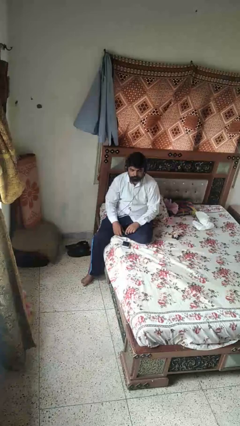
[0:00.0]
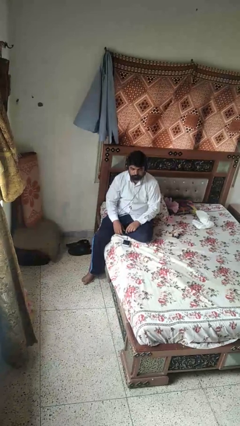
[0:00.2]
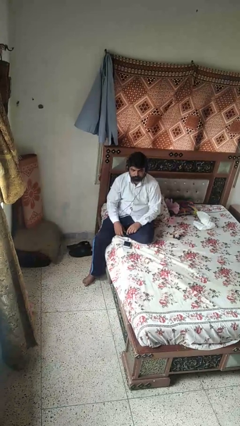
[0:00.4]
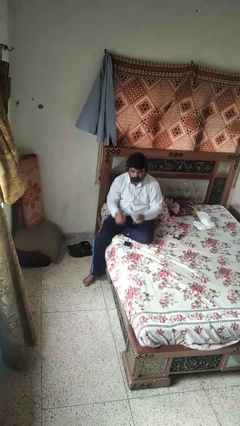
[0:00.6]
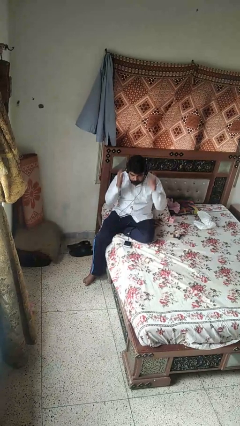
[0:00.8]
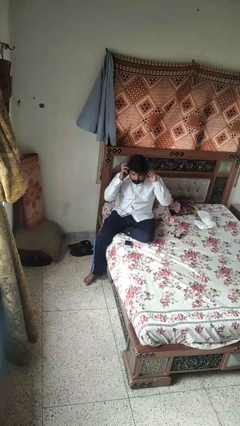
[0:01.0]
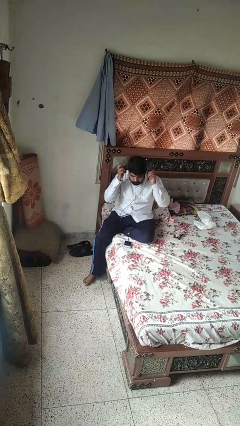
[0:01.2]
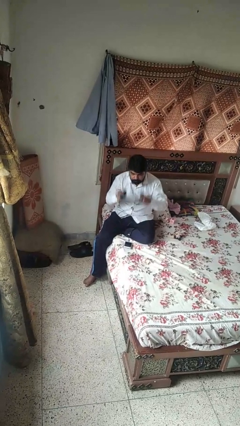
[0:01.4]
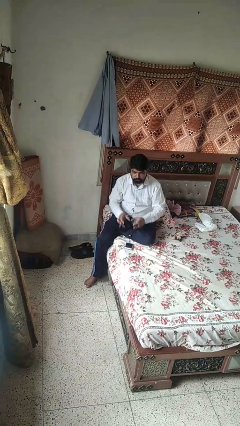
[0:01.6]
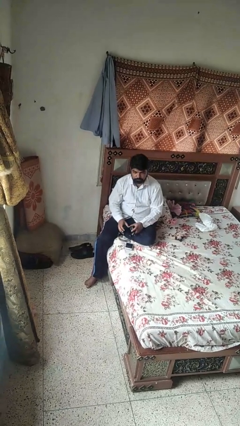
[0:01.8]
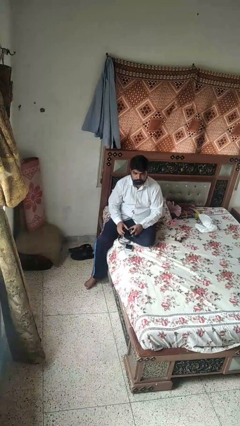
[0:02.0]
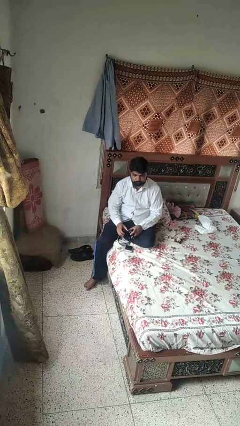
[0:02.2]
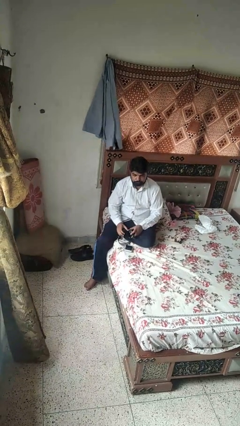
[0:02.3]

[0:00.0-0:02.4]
person takes off headphones

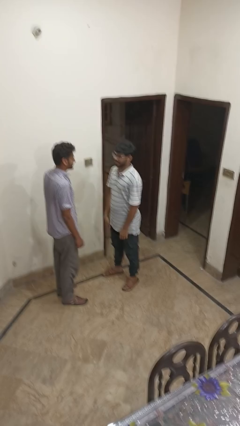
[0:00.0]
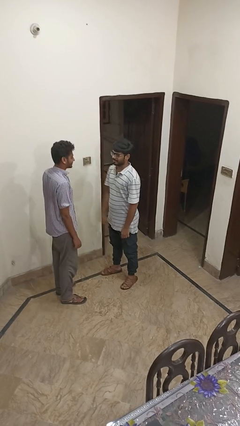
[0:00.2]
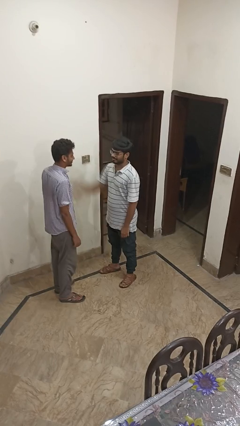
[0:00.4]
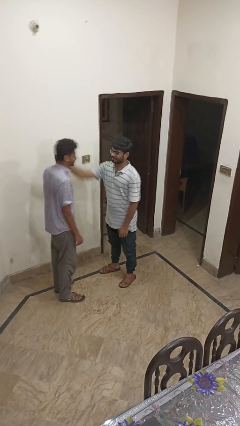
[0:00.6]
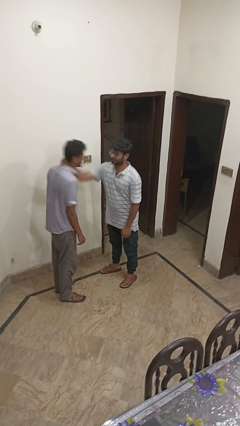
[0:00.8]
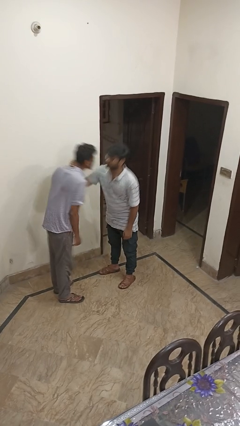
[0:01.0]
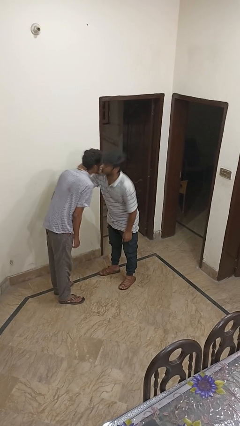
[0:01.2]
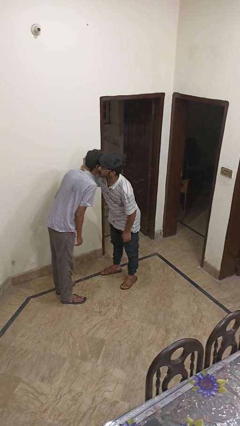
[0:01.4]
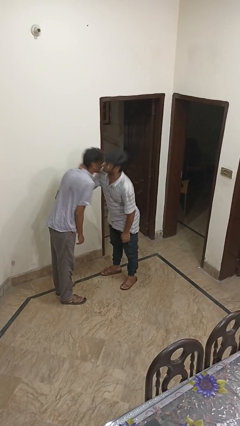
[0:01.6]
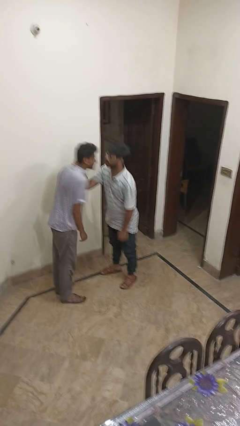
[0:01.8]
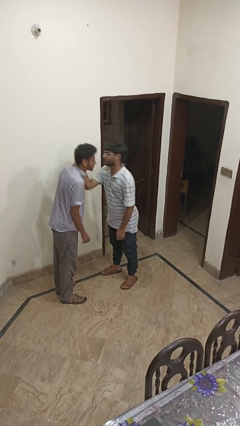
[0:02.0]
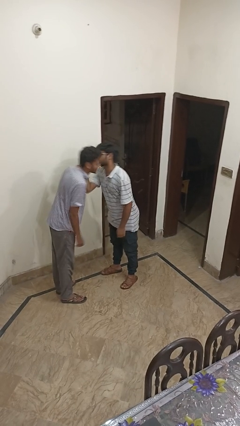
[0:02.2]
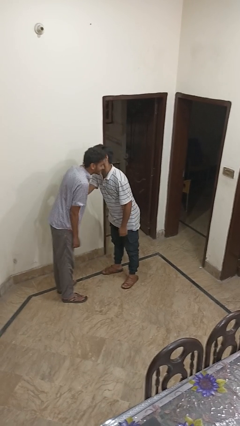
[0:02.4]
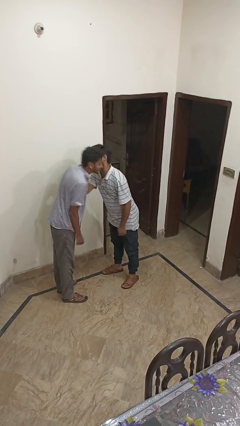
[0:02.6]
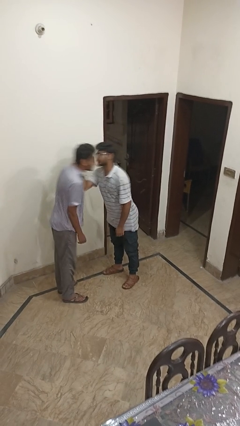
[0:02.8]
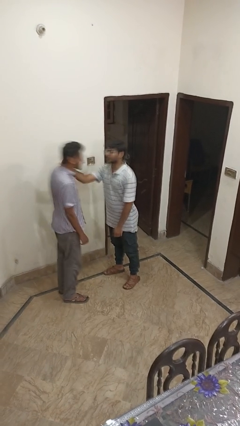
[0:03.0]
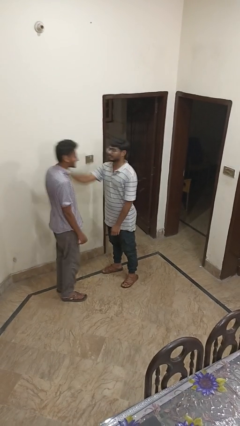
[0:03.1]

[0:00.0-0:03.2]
person kisses cheek of person

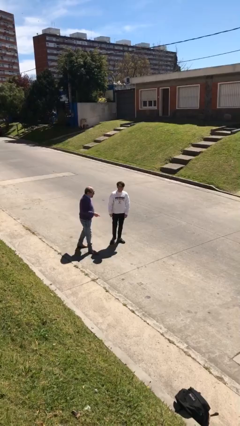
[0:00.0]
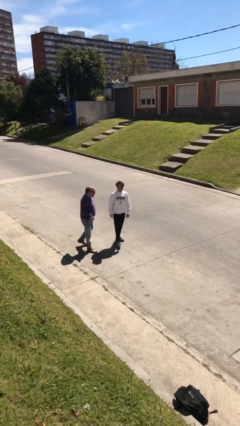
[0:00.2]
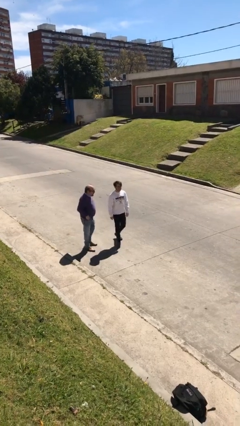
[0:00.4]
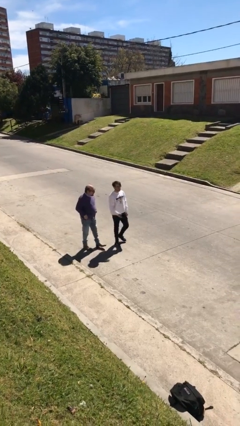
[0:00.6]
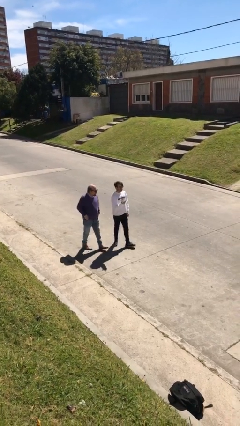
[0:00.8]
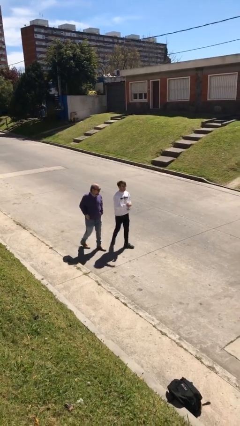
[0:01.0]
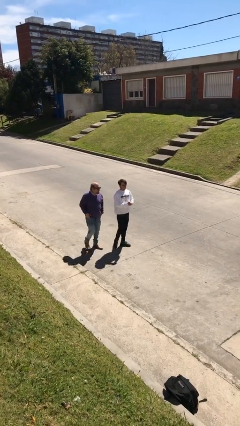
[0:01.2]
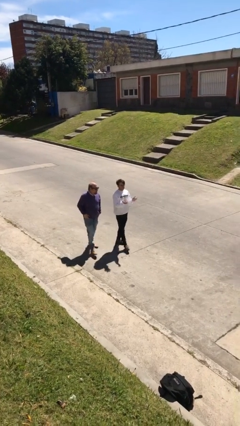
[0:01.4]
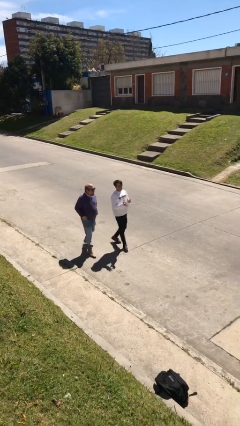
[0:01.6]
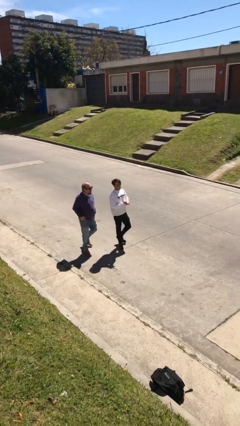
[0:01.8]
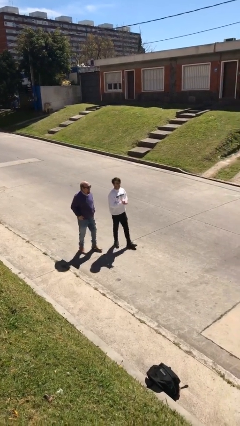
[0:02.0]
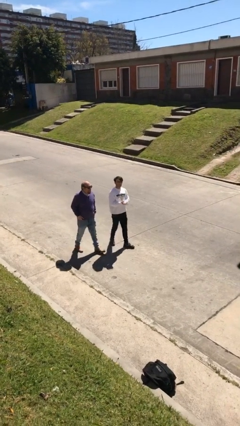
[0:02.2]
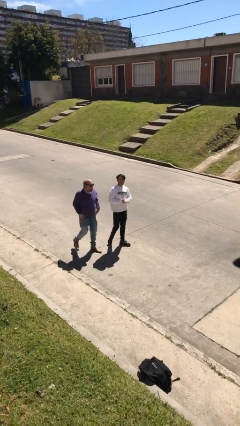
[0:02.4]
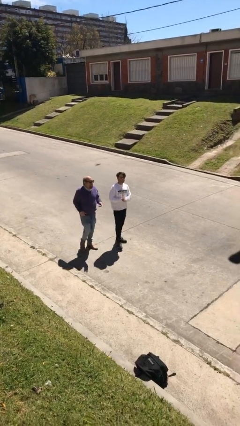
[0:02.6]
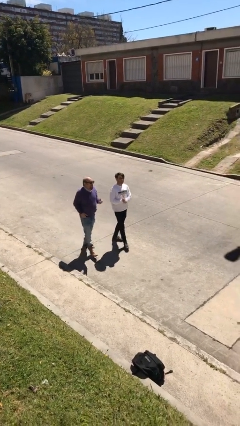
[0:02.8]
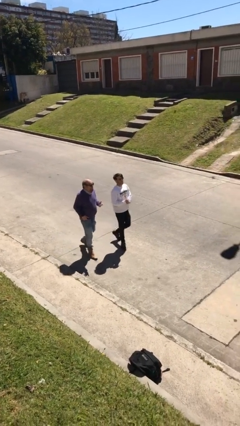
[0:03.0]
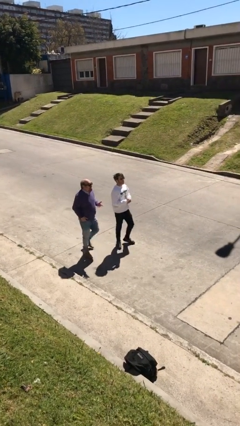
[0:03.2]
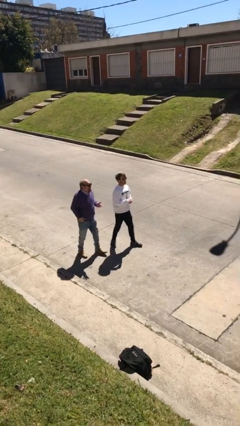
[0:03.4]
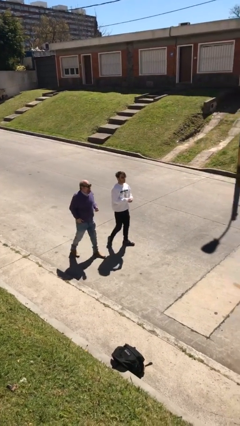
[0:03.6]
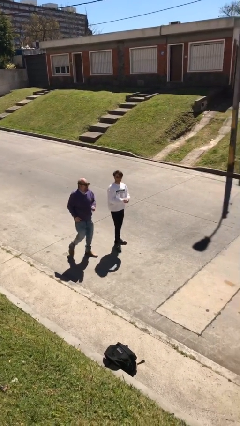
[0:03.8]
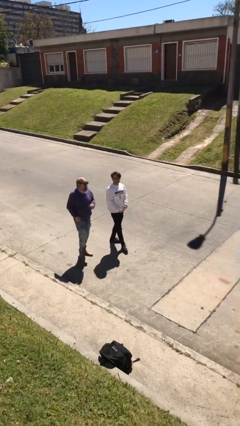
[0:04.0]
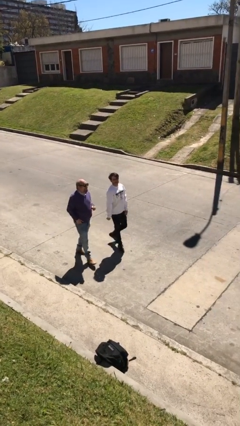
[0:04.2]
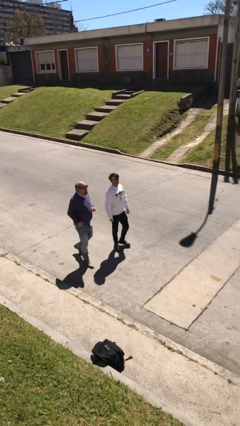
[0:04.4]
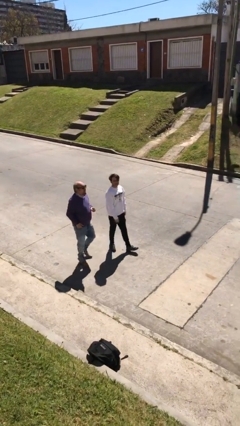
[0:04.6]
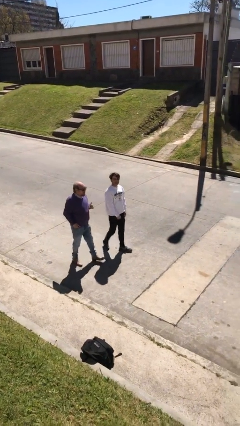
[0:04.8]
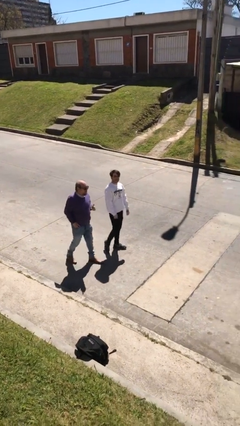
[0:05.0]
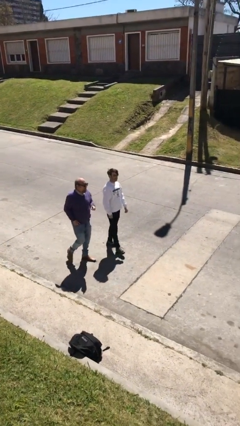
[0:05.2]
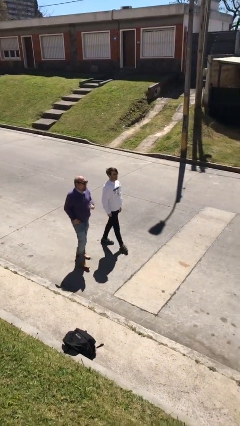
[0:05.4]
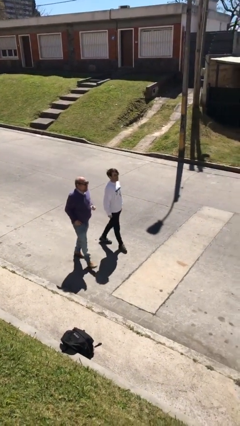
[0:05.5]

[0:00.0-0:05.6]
person talks to person

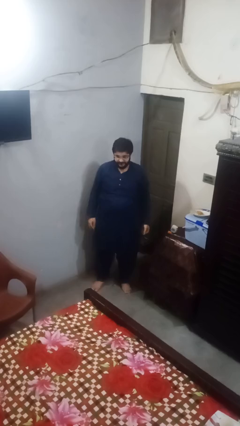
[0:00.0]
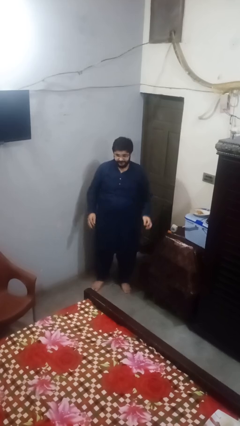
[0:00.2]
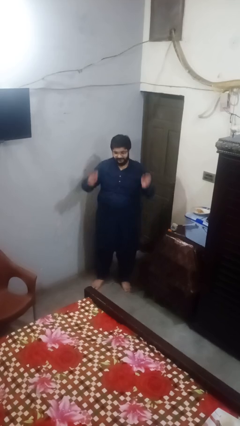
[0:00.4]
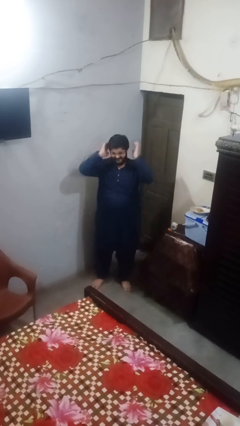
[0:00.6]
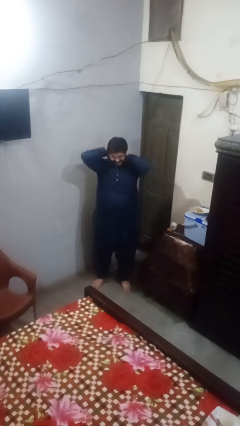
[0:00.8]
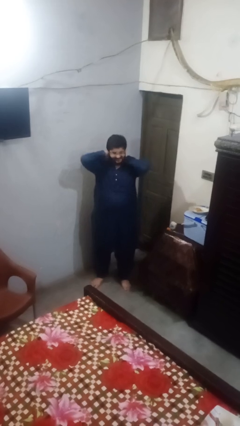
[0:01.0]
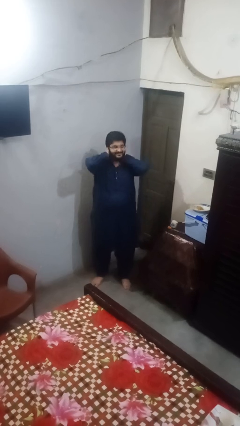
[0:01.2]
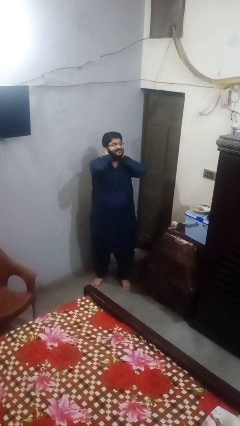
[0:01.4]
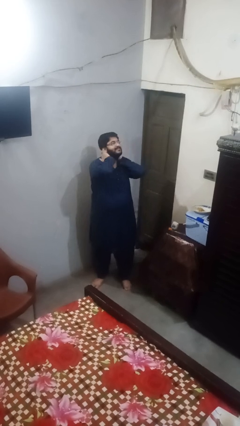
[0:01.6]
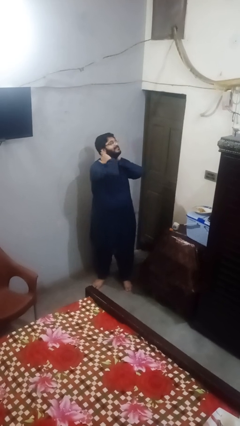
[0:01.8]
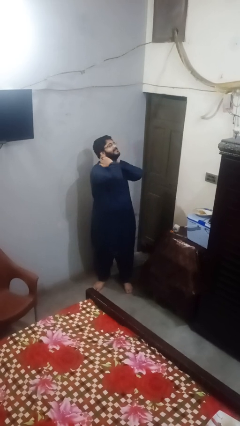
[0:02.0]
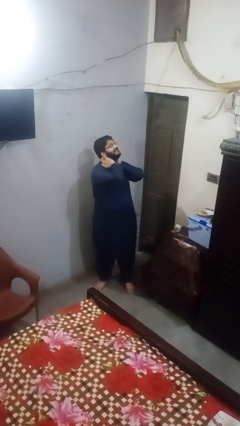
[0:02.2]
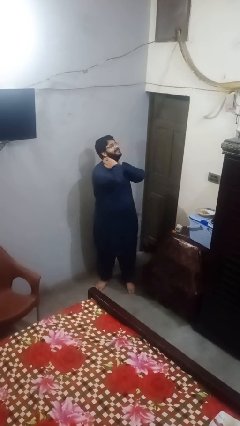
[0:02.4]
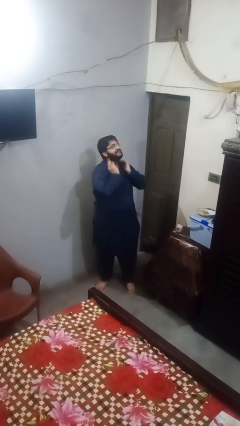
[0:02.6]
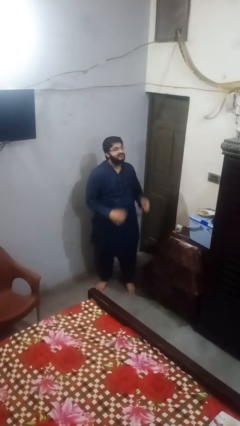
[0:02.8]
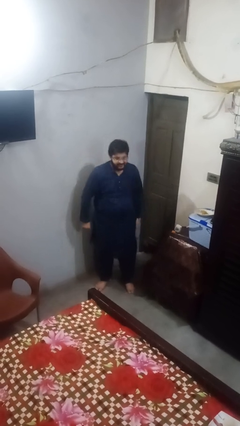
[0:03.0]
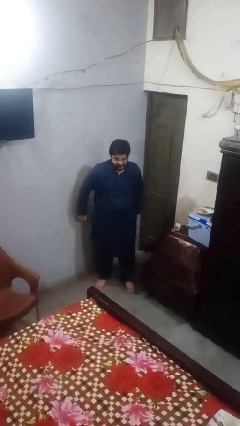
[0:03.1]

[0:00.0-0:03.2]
person rubs neck

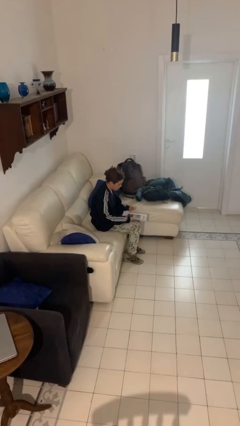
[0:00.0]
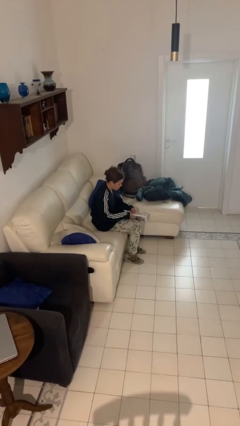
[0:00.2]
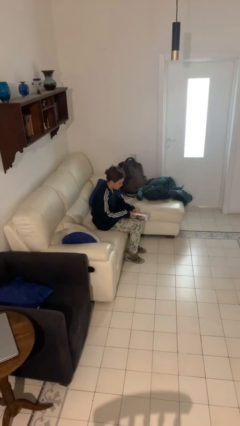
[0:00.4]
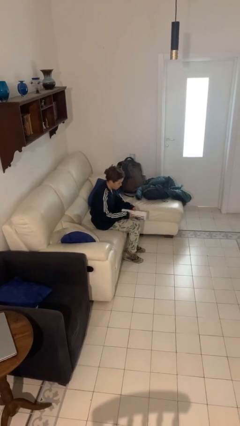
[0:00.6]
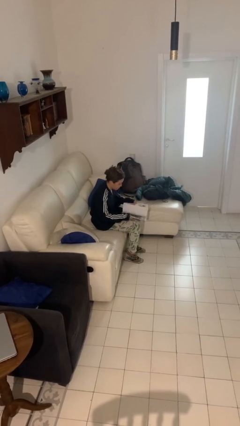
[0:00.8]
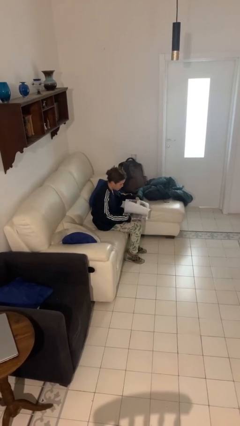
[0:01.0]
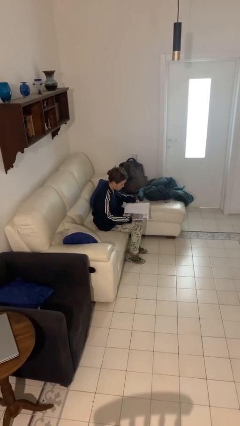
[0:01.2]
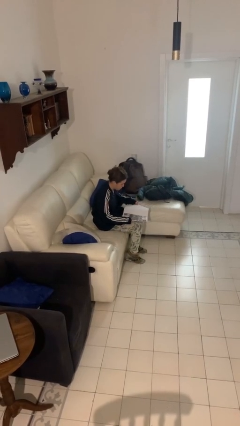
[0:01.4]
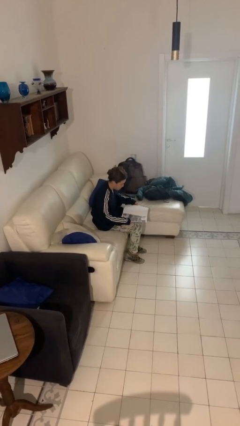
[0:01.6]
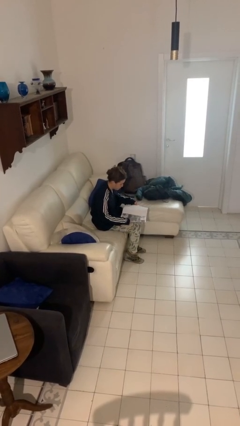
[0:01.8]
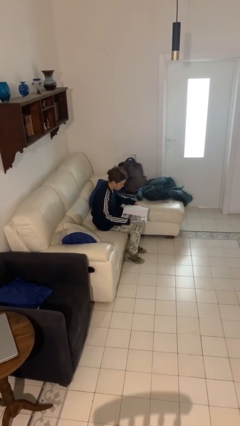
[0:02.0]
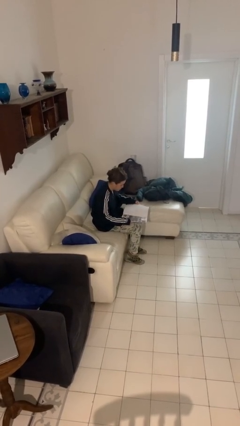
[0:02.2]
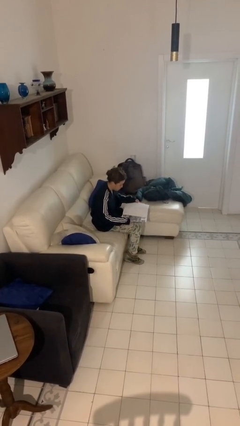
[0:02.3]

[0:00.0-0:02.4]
person reads magazine

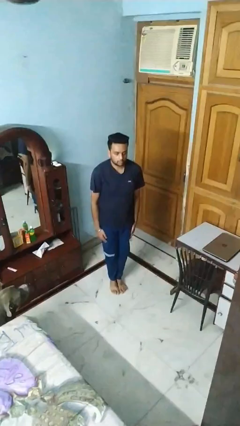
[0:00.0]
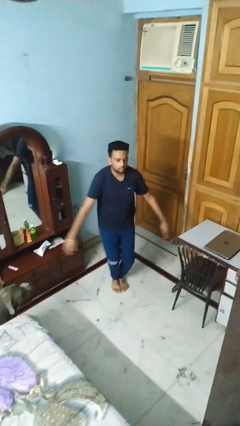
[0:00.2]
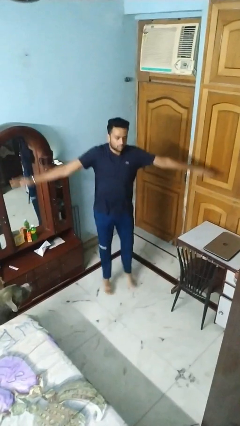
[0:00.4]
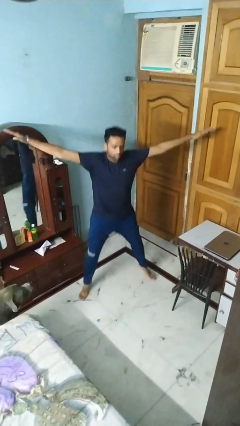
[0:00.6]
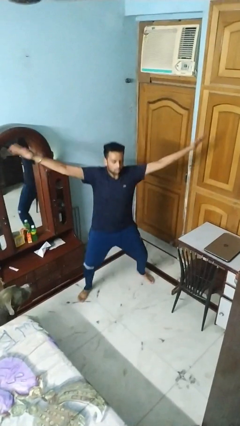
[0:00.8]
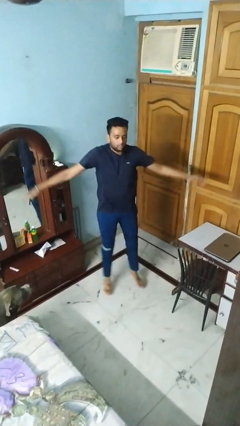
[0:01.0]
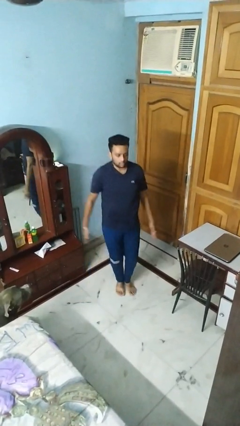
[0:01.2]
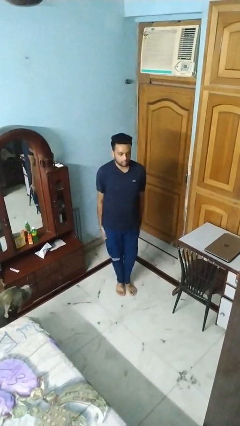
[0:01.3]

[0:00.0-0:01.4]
person exercises with jumping jacks
